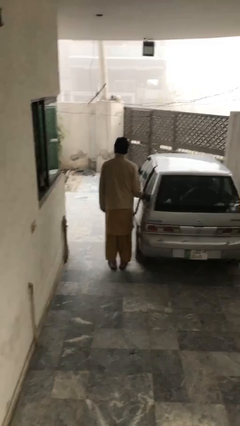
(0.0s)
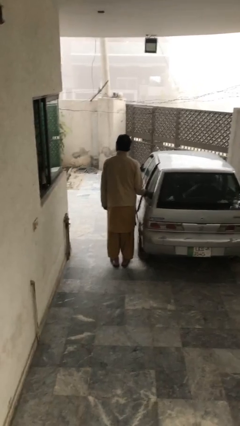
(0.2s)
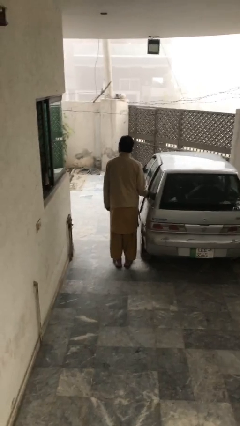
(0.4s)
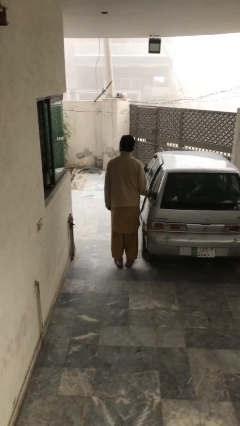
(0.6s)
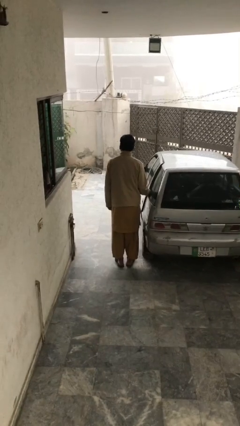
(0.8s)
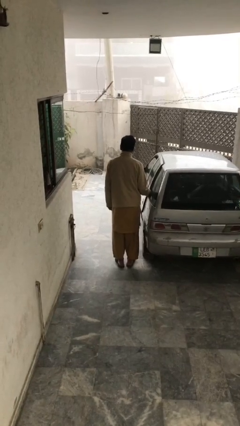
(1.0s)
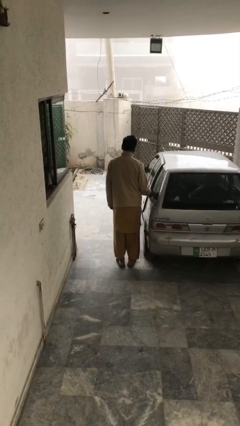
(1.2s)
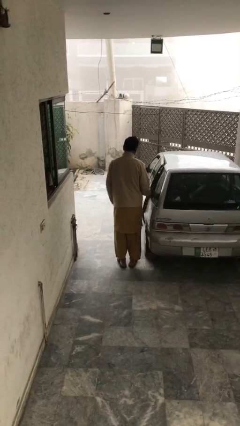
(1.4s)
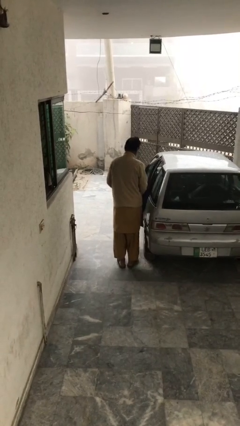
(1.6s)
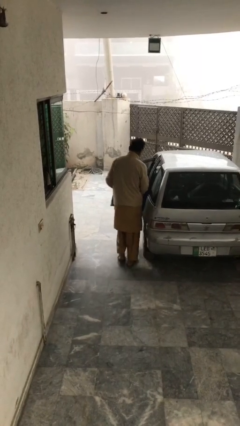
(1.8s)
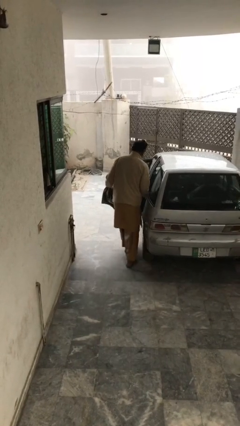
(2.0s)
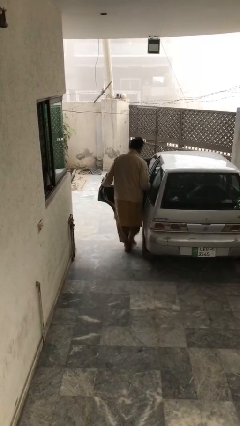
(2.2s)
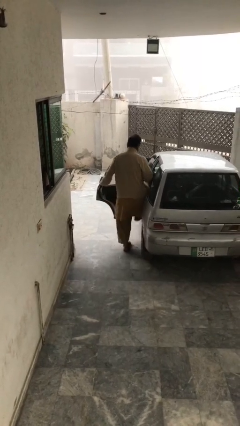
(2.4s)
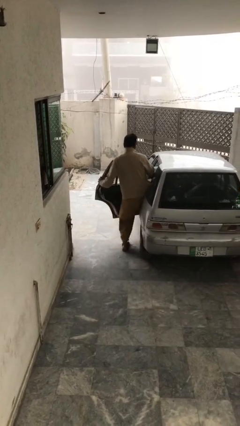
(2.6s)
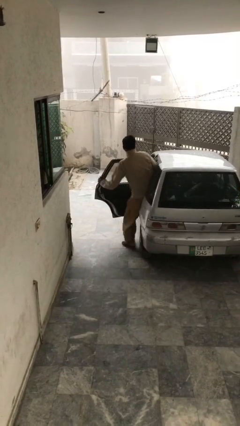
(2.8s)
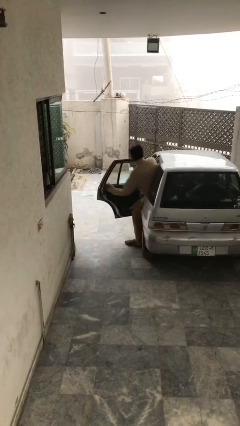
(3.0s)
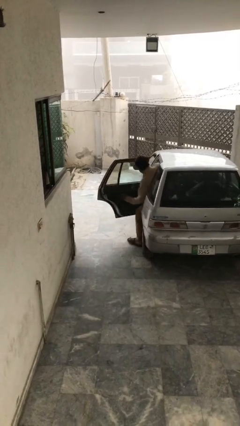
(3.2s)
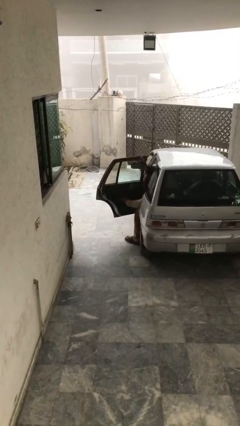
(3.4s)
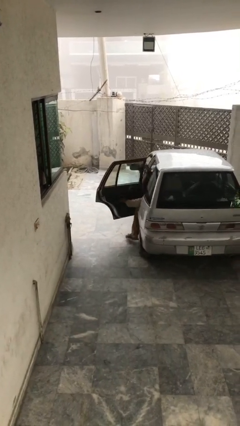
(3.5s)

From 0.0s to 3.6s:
car picks up person

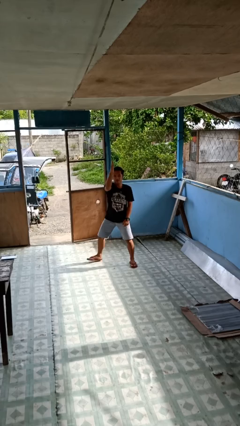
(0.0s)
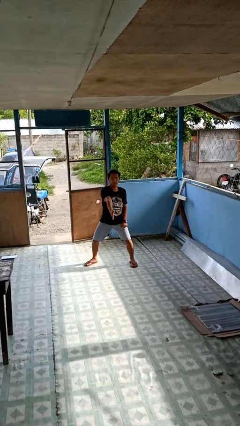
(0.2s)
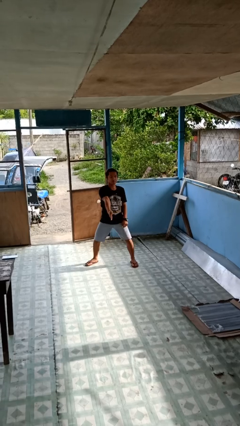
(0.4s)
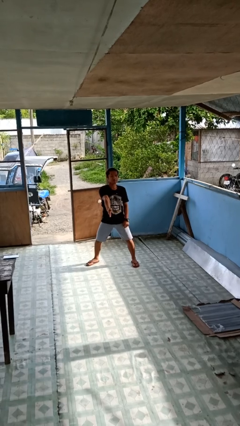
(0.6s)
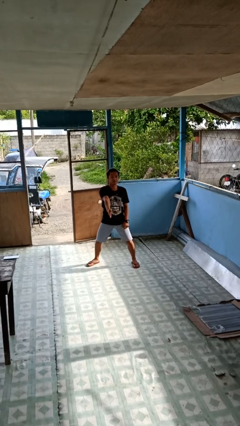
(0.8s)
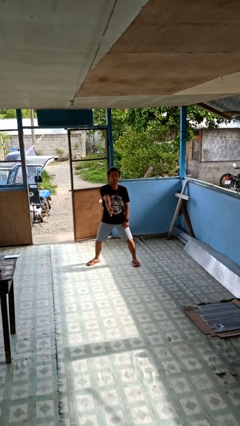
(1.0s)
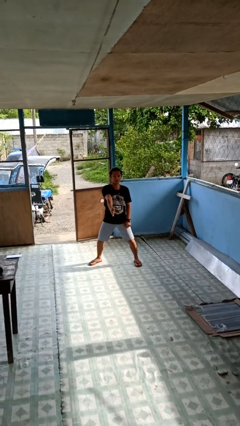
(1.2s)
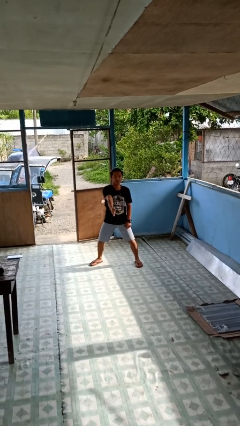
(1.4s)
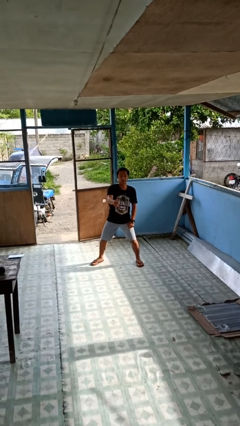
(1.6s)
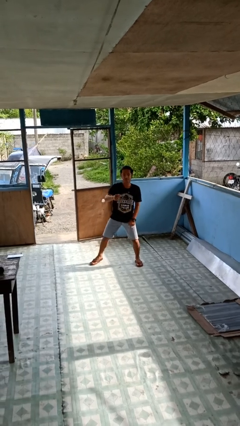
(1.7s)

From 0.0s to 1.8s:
person karate chop

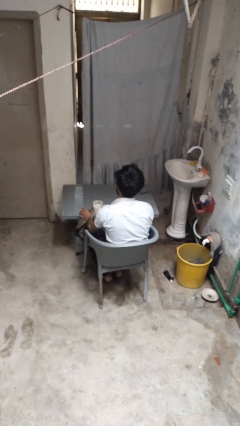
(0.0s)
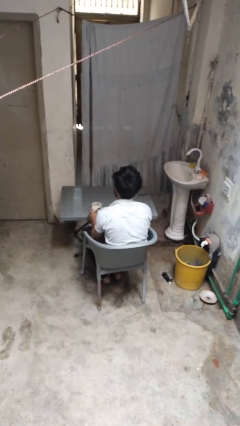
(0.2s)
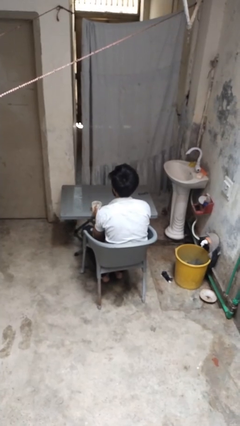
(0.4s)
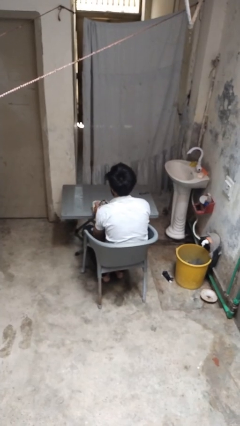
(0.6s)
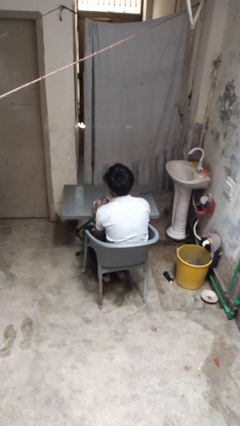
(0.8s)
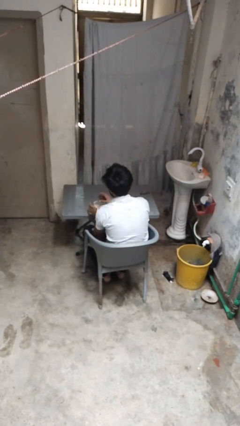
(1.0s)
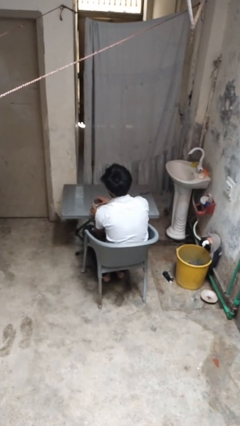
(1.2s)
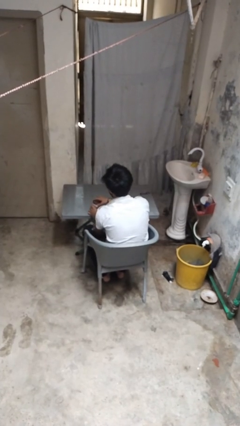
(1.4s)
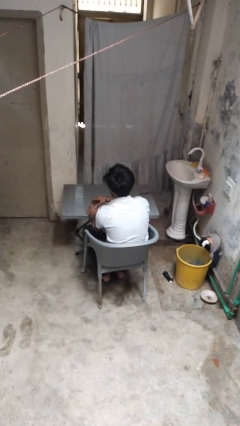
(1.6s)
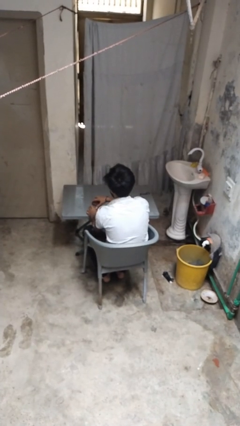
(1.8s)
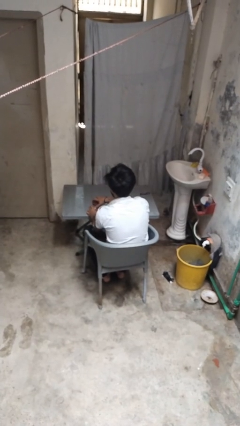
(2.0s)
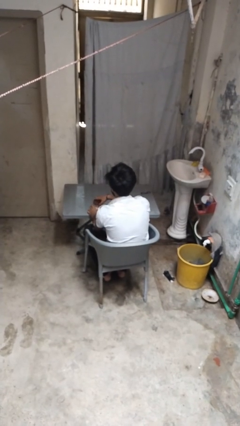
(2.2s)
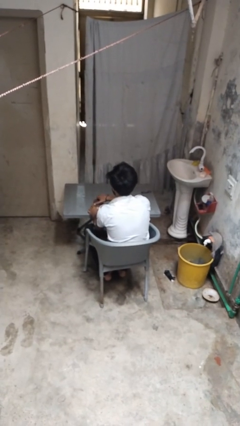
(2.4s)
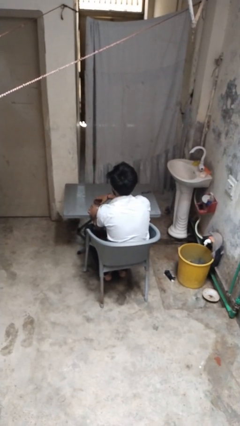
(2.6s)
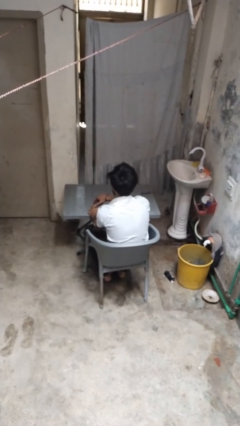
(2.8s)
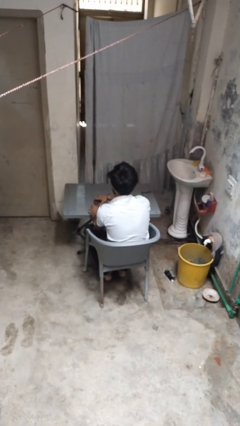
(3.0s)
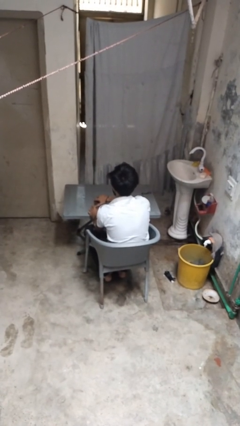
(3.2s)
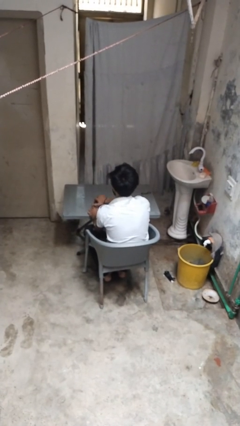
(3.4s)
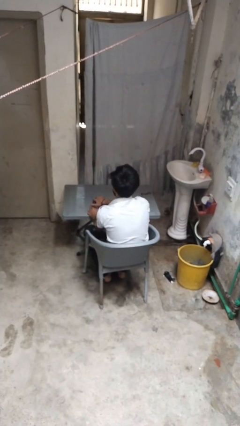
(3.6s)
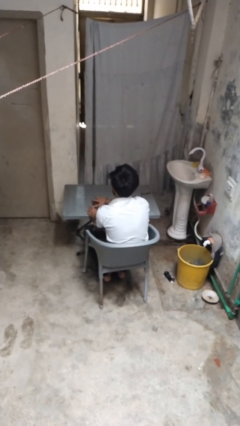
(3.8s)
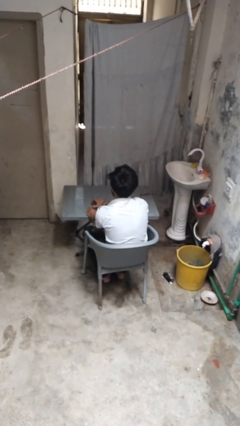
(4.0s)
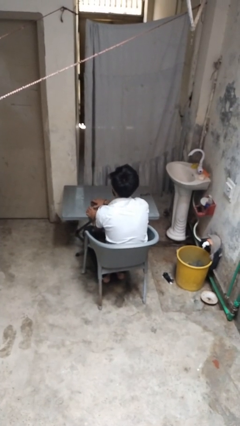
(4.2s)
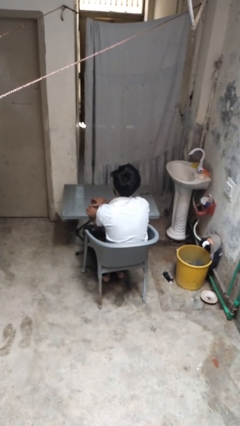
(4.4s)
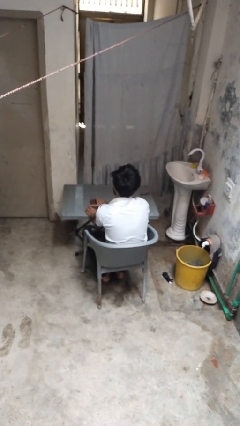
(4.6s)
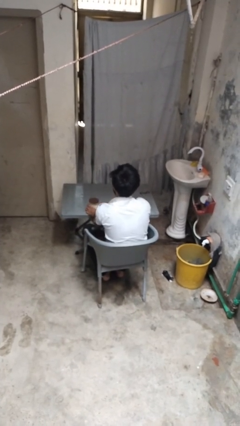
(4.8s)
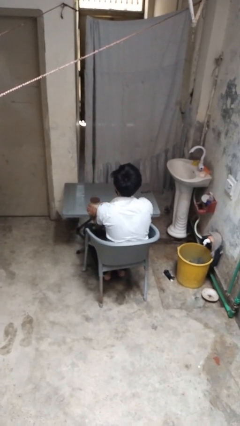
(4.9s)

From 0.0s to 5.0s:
person closes jar

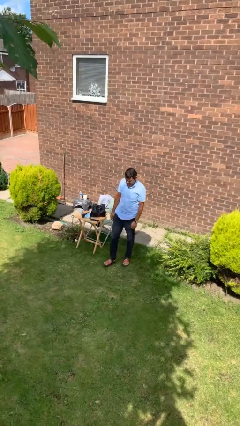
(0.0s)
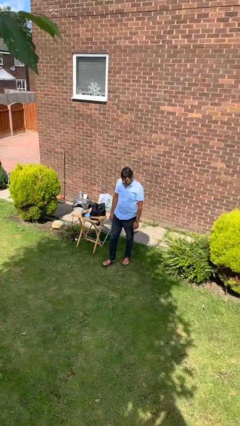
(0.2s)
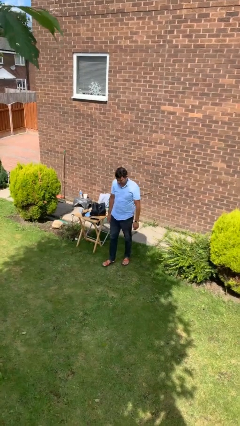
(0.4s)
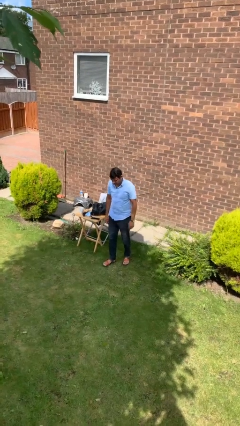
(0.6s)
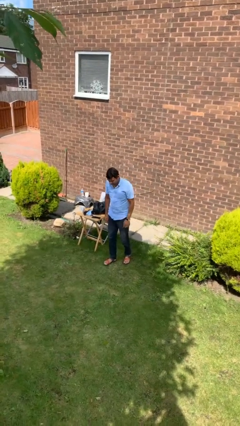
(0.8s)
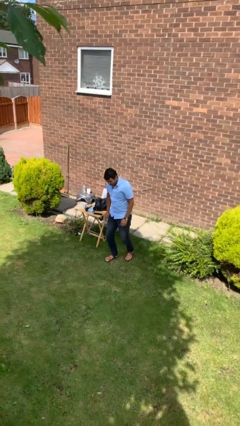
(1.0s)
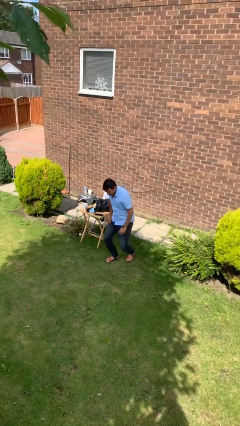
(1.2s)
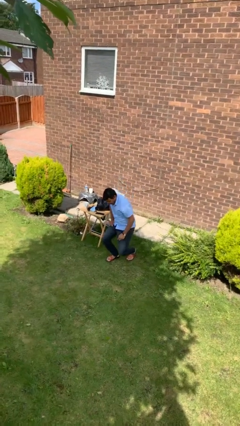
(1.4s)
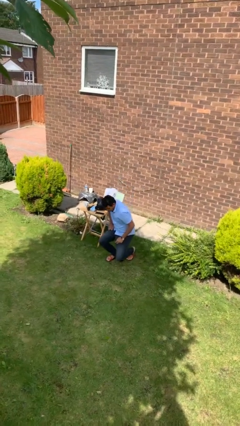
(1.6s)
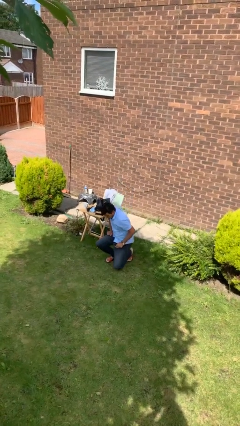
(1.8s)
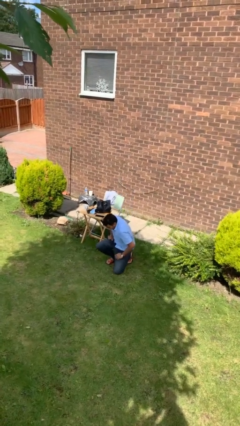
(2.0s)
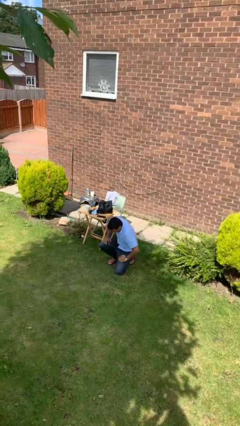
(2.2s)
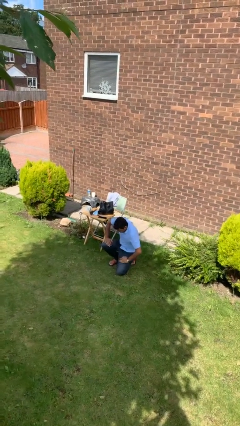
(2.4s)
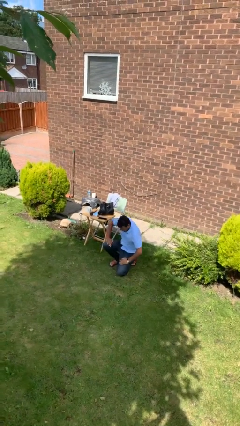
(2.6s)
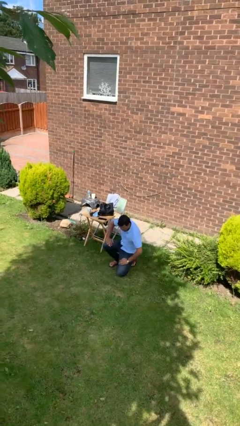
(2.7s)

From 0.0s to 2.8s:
person kneels

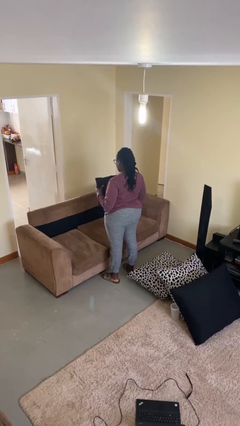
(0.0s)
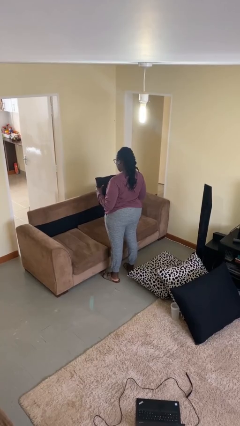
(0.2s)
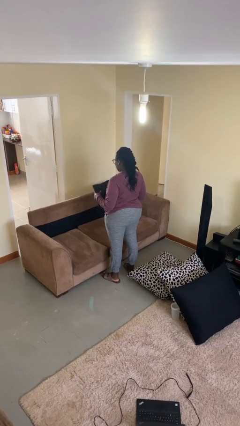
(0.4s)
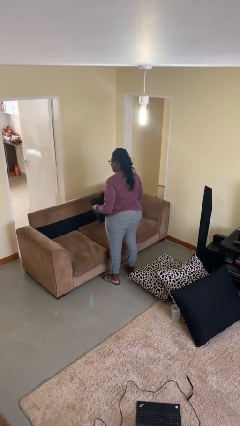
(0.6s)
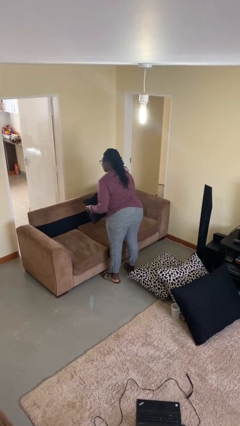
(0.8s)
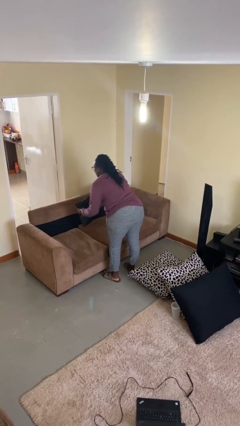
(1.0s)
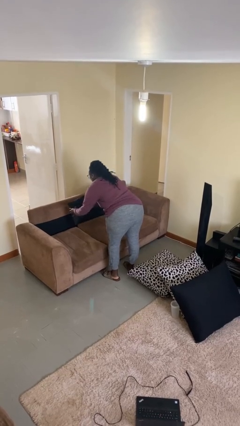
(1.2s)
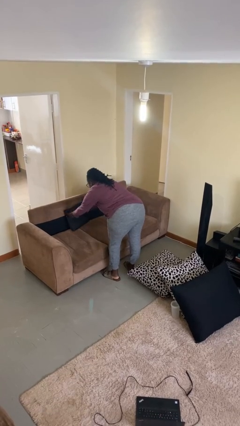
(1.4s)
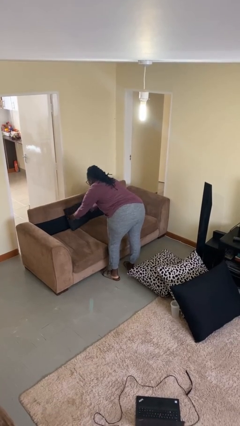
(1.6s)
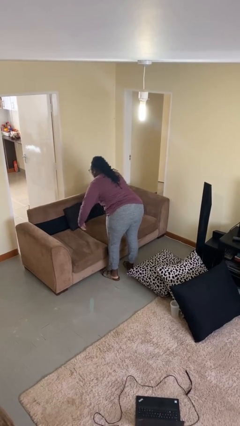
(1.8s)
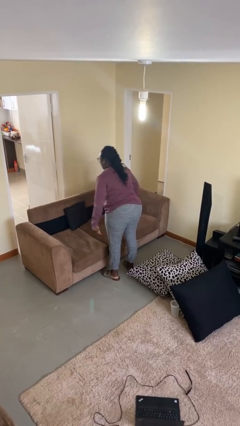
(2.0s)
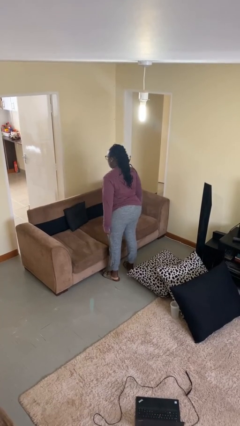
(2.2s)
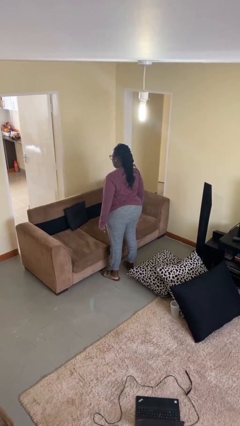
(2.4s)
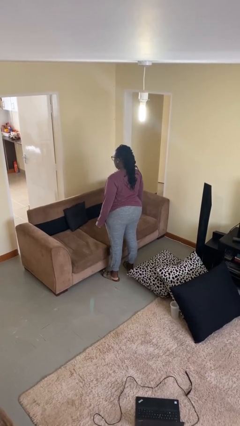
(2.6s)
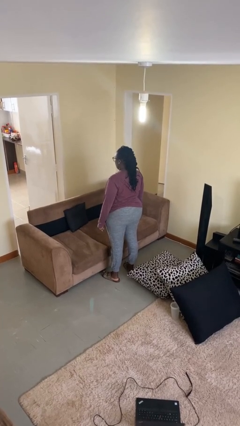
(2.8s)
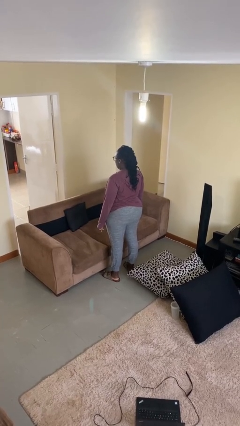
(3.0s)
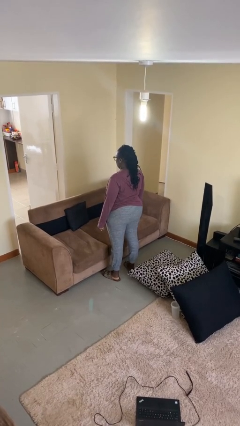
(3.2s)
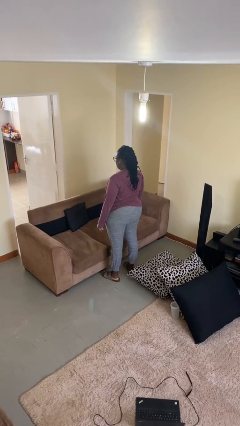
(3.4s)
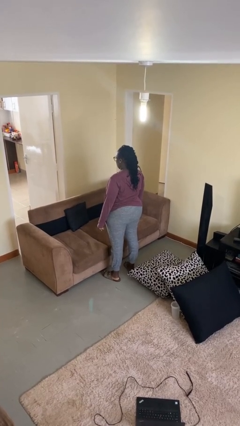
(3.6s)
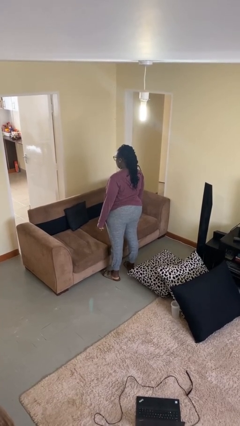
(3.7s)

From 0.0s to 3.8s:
person puts down object on couch

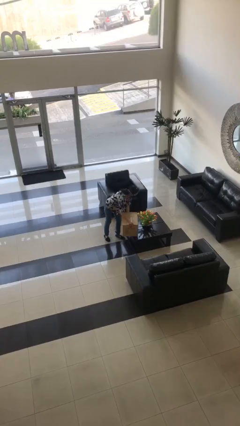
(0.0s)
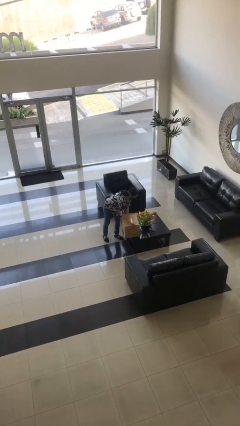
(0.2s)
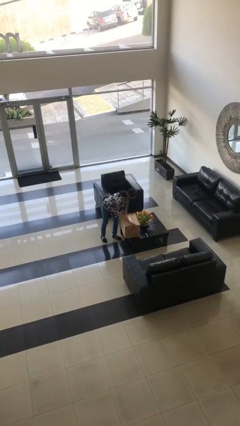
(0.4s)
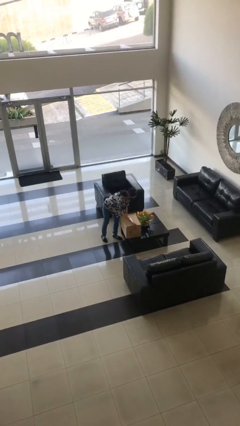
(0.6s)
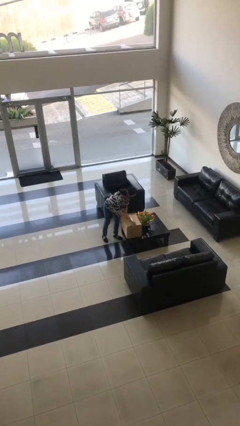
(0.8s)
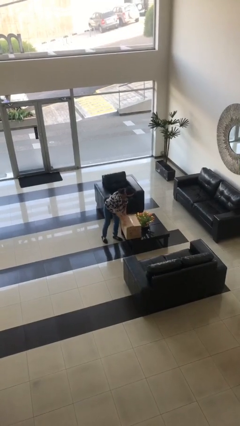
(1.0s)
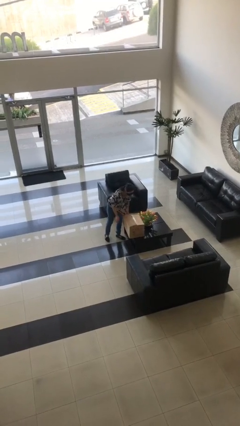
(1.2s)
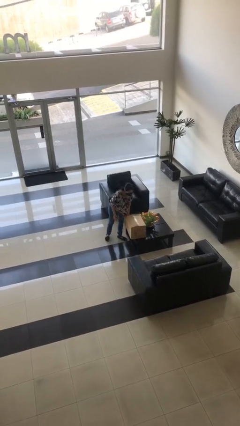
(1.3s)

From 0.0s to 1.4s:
person puts down object on table
